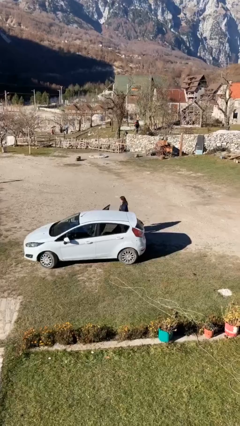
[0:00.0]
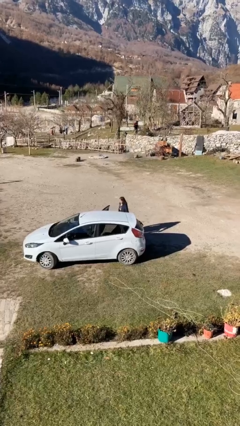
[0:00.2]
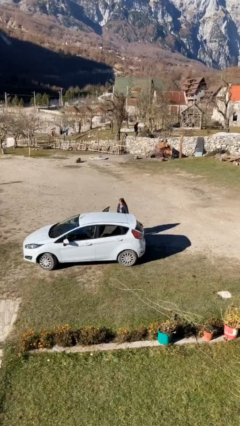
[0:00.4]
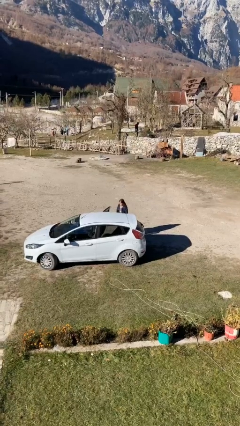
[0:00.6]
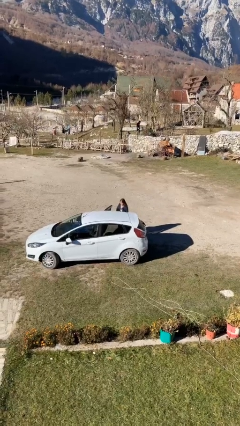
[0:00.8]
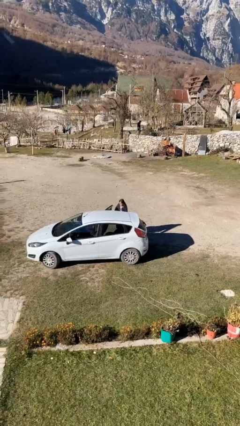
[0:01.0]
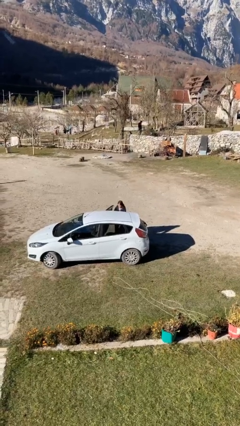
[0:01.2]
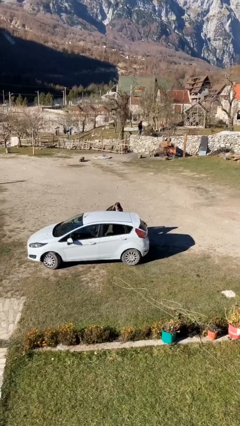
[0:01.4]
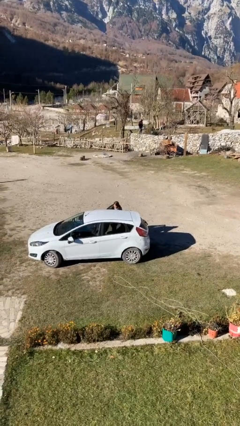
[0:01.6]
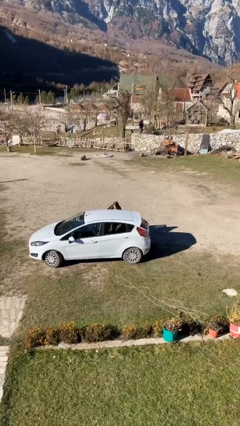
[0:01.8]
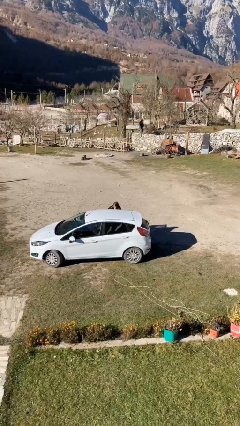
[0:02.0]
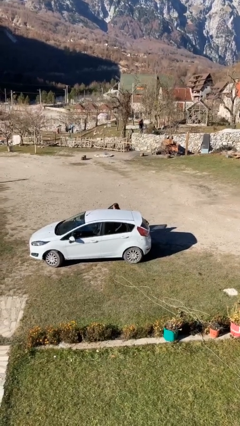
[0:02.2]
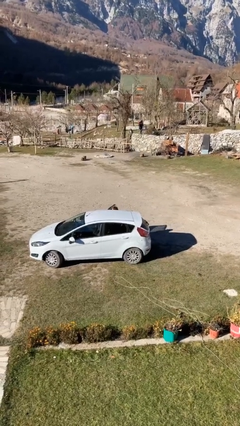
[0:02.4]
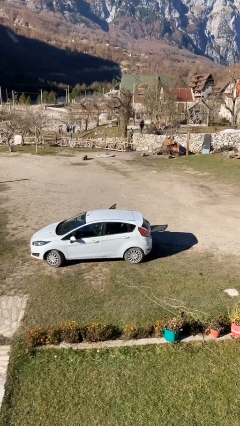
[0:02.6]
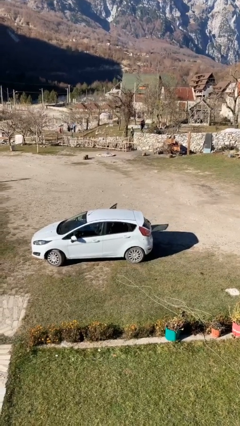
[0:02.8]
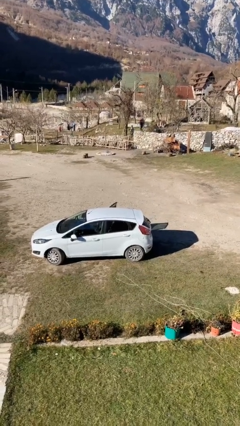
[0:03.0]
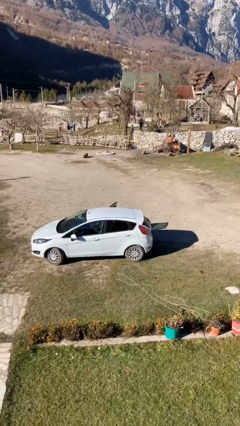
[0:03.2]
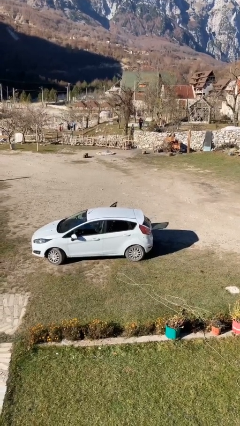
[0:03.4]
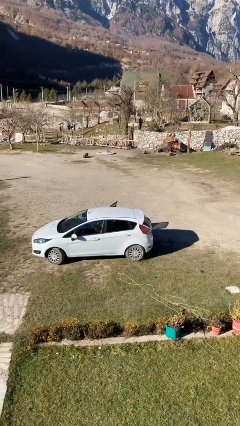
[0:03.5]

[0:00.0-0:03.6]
person enters car

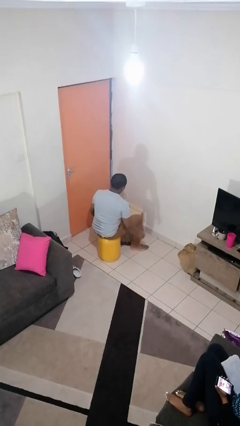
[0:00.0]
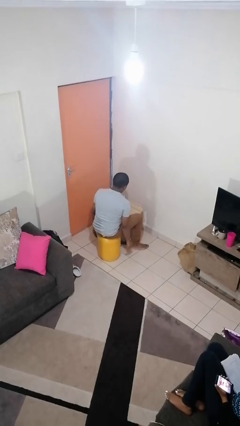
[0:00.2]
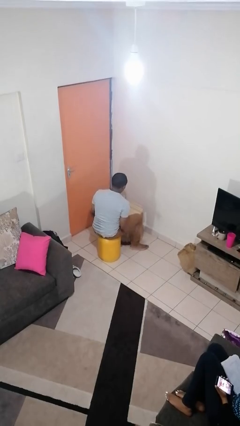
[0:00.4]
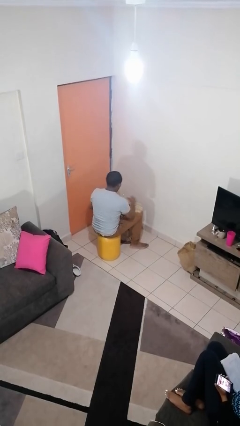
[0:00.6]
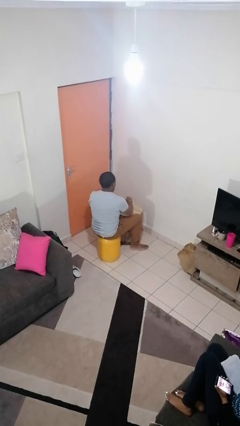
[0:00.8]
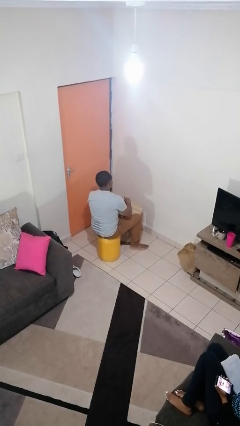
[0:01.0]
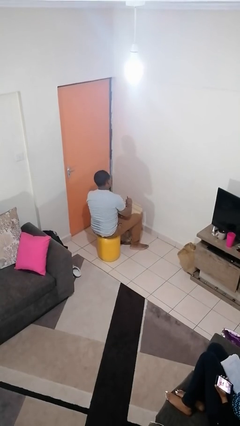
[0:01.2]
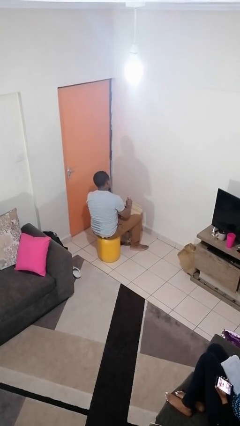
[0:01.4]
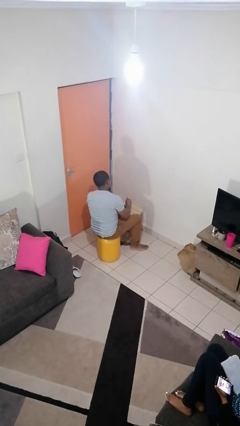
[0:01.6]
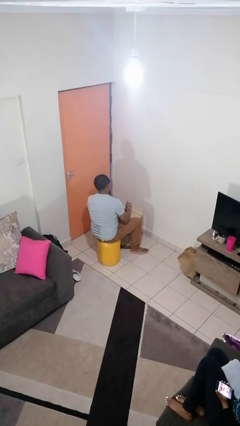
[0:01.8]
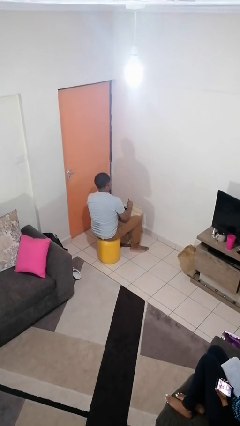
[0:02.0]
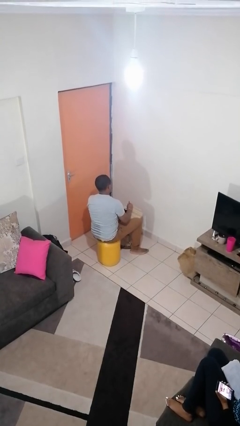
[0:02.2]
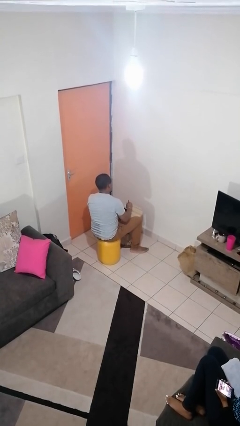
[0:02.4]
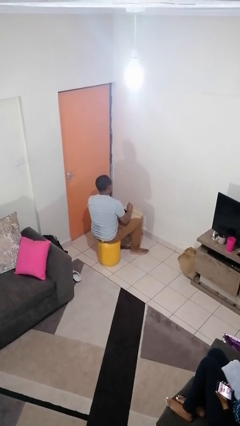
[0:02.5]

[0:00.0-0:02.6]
person stirs mug

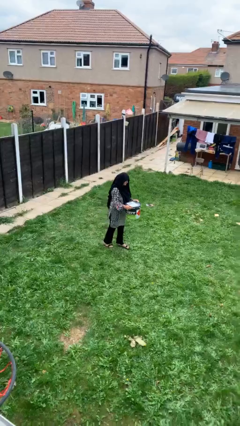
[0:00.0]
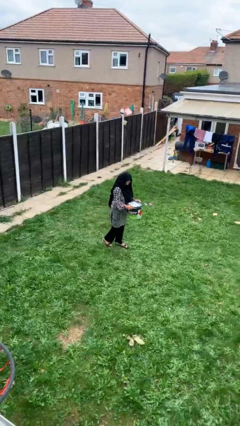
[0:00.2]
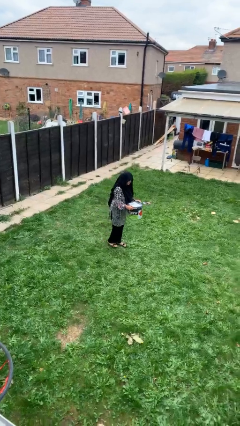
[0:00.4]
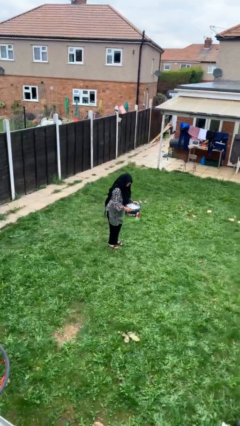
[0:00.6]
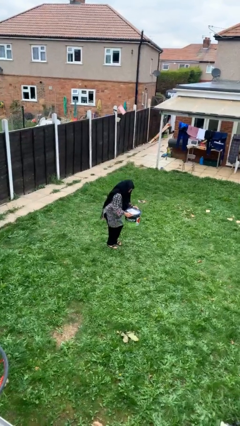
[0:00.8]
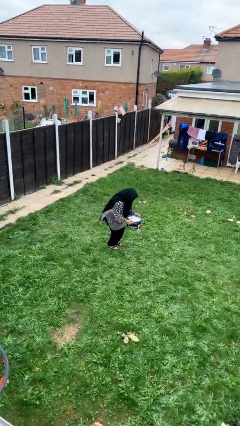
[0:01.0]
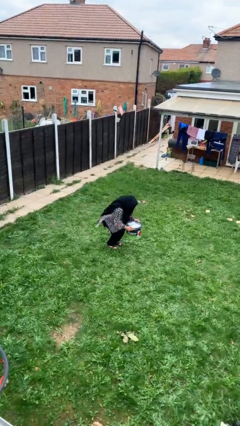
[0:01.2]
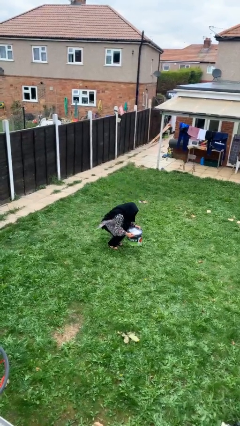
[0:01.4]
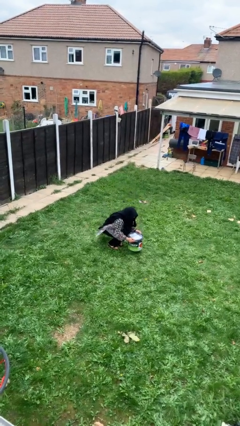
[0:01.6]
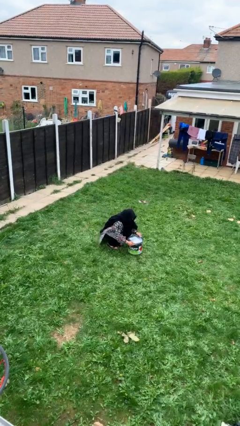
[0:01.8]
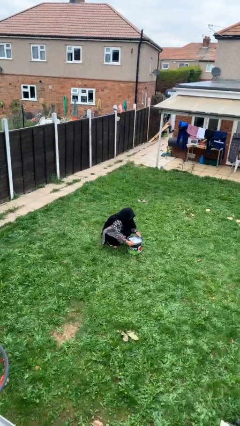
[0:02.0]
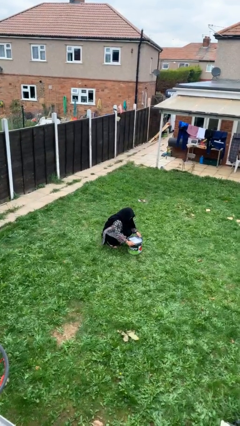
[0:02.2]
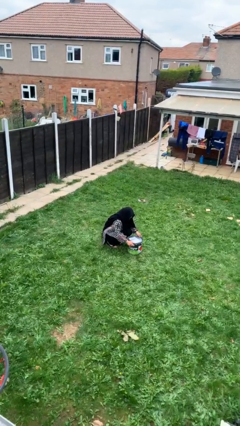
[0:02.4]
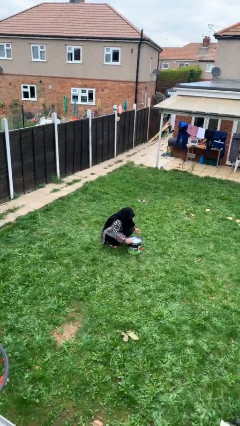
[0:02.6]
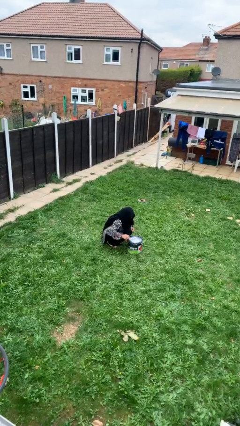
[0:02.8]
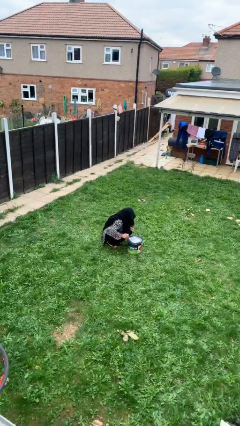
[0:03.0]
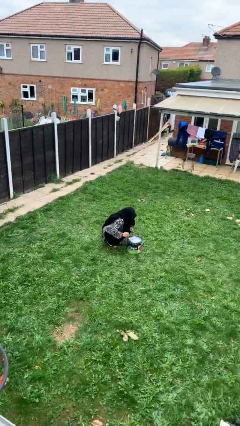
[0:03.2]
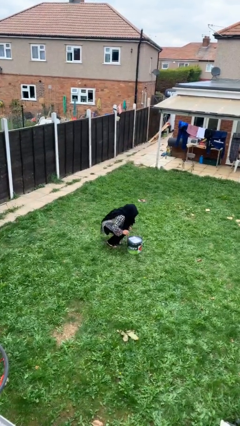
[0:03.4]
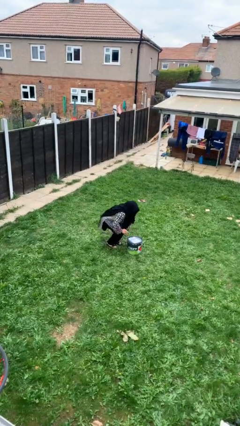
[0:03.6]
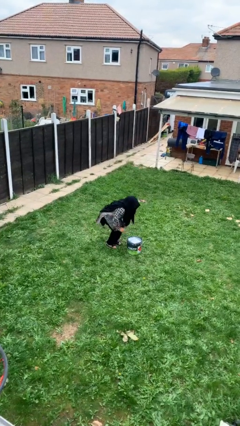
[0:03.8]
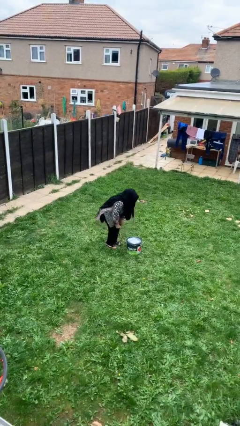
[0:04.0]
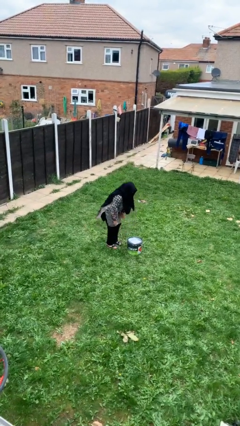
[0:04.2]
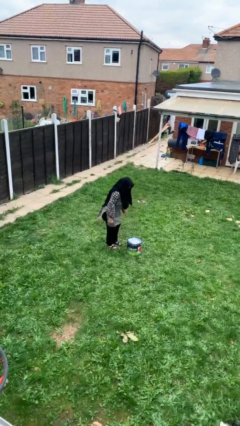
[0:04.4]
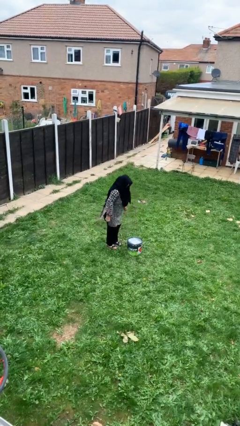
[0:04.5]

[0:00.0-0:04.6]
person puts down object on floor

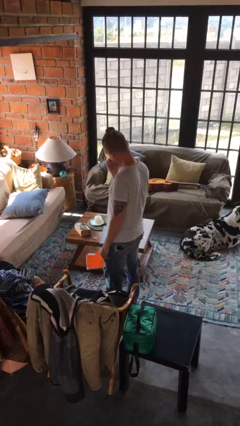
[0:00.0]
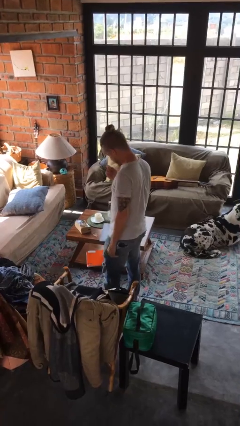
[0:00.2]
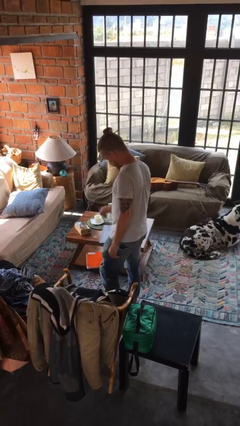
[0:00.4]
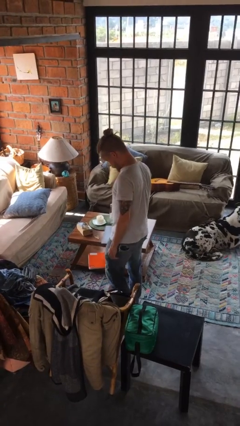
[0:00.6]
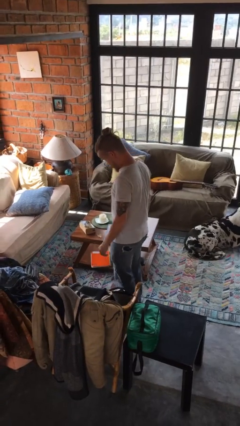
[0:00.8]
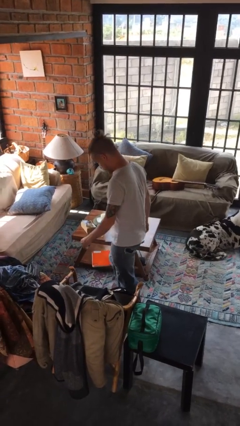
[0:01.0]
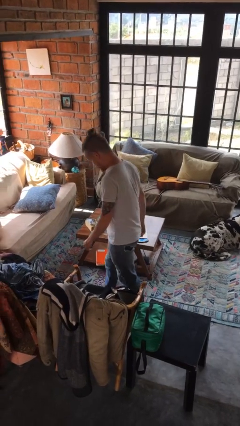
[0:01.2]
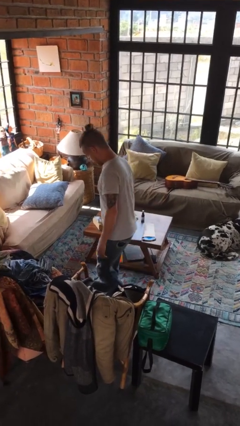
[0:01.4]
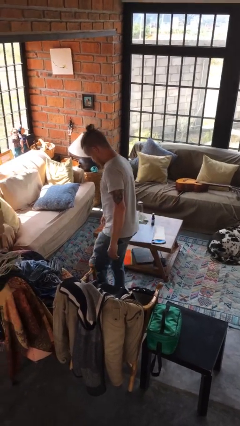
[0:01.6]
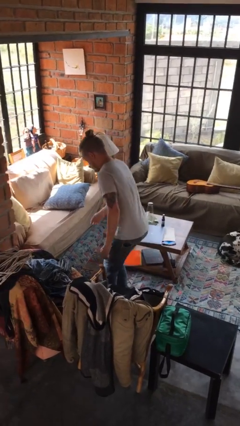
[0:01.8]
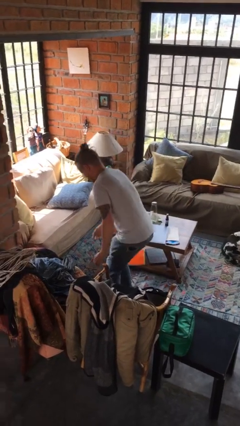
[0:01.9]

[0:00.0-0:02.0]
person stubs toe

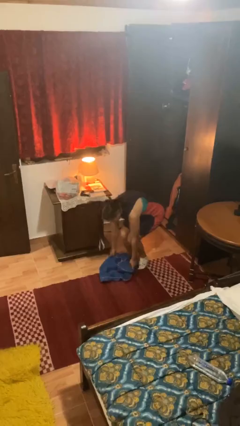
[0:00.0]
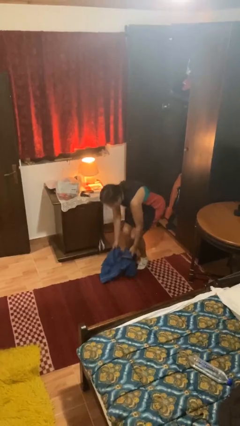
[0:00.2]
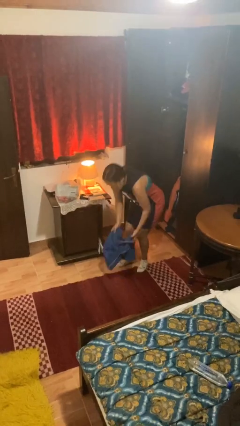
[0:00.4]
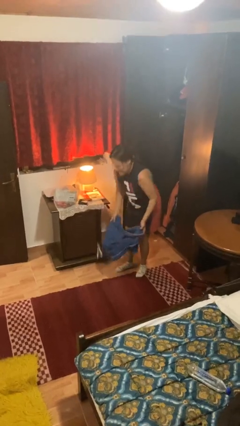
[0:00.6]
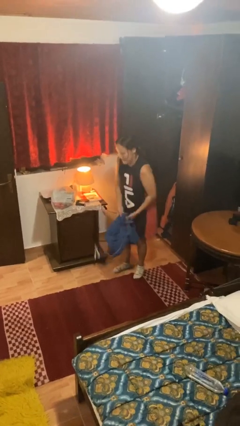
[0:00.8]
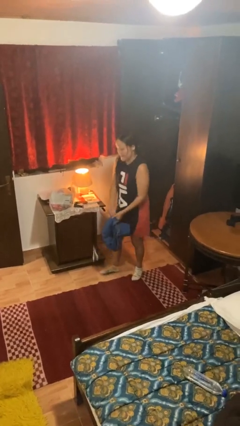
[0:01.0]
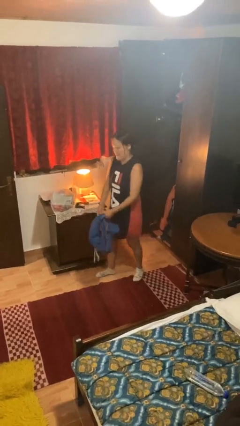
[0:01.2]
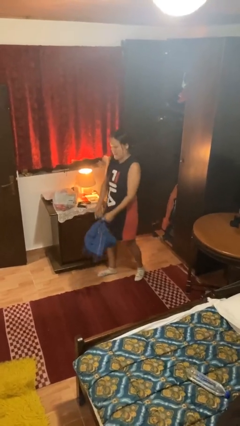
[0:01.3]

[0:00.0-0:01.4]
person picks up object from floor

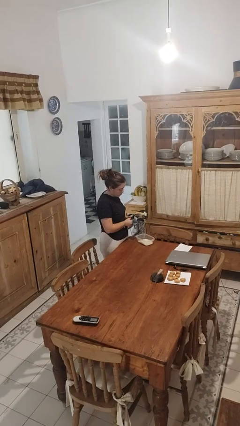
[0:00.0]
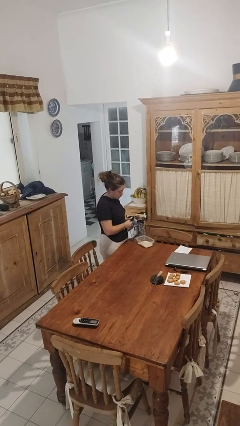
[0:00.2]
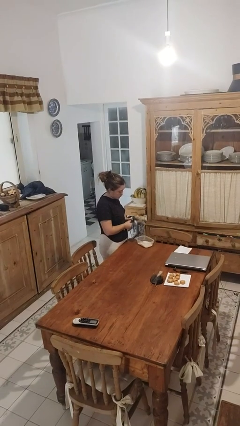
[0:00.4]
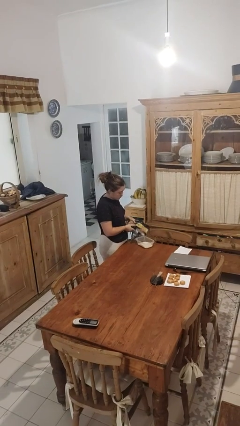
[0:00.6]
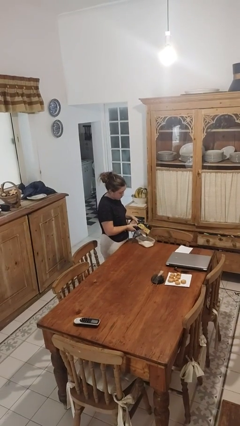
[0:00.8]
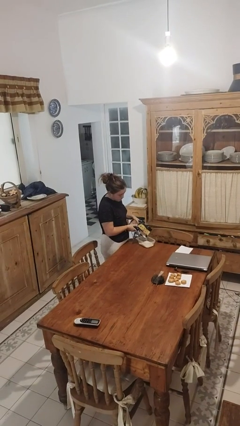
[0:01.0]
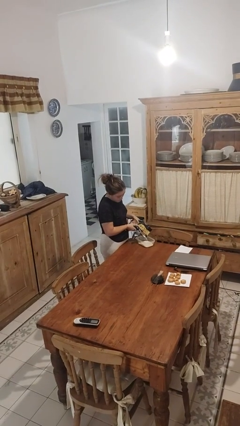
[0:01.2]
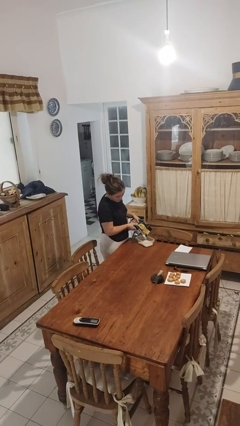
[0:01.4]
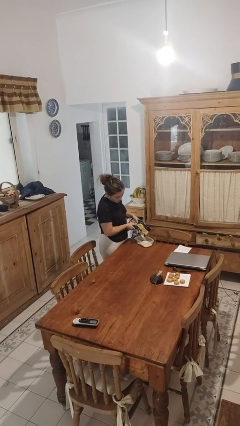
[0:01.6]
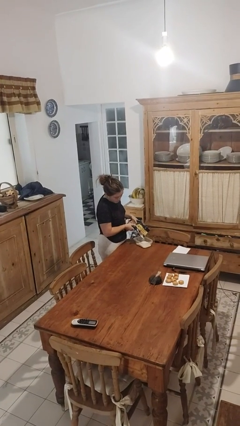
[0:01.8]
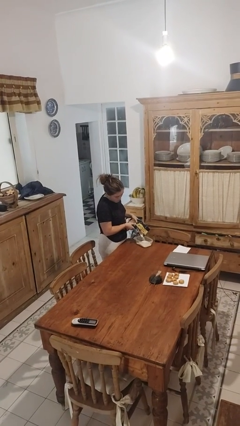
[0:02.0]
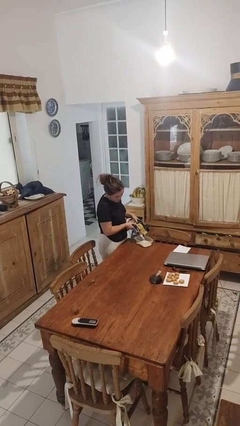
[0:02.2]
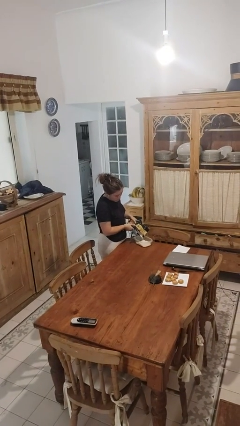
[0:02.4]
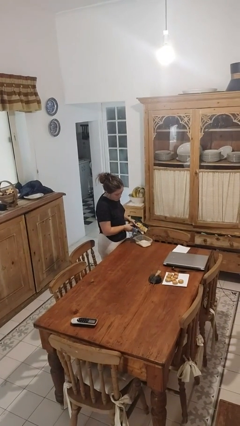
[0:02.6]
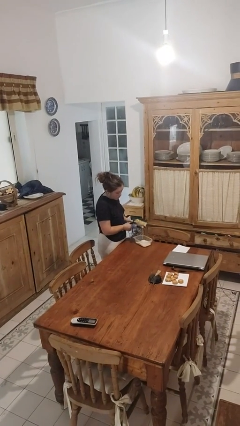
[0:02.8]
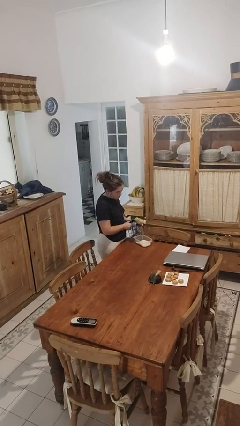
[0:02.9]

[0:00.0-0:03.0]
person pours into bowl
